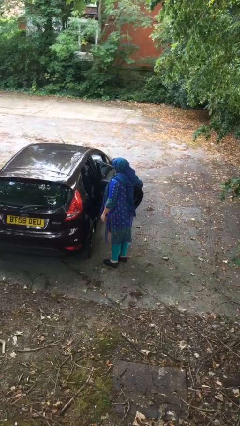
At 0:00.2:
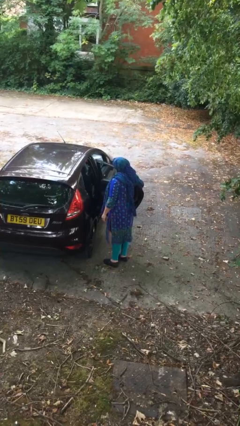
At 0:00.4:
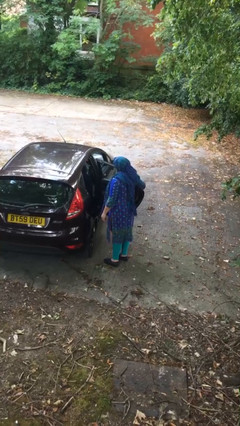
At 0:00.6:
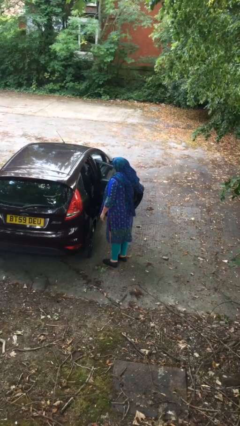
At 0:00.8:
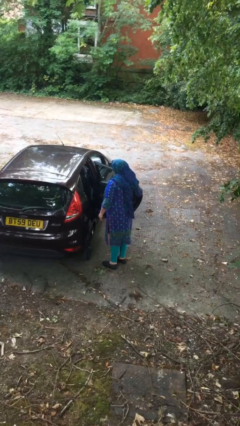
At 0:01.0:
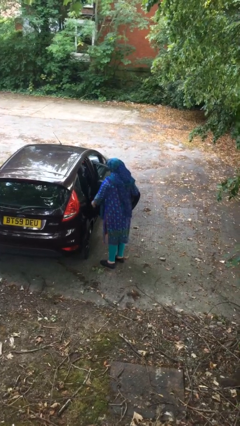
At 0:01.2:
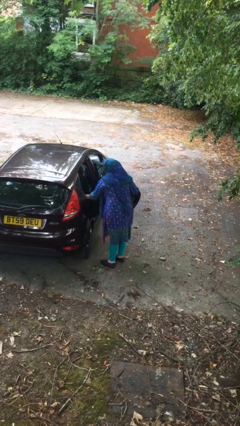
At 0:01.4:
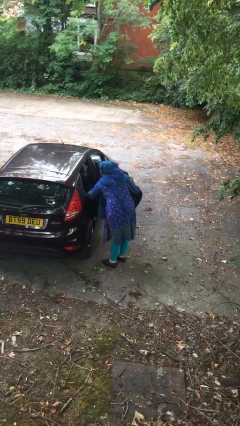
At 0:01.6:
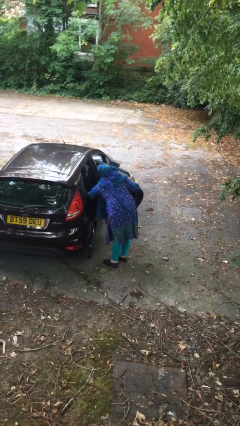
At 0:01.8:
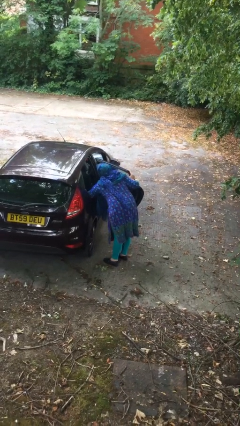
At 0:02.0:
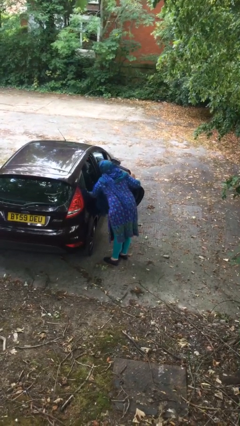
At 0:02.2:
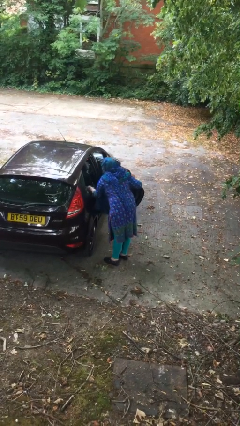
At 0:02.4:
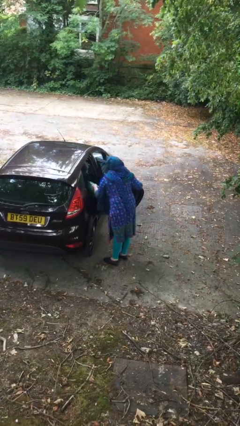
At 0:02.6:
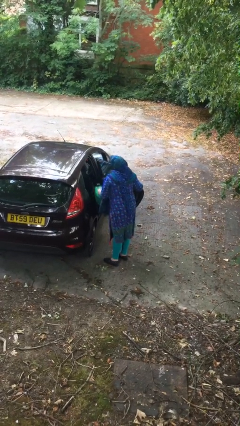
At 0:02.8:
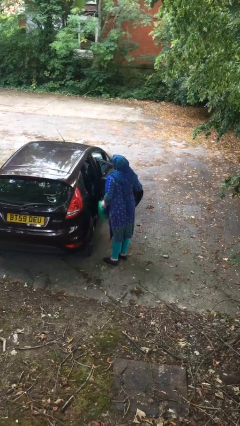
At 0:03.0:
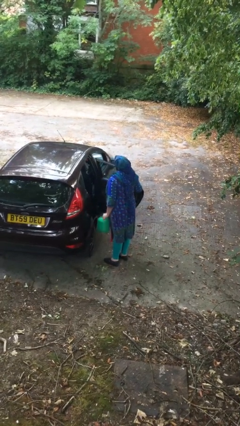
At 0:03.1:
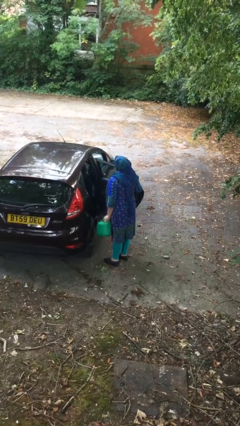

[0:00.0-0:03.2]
person unloads car

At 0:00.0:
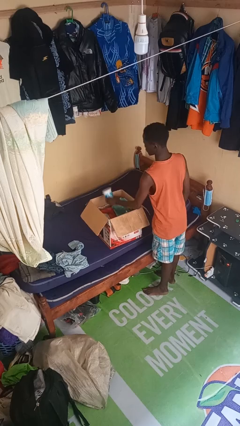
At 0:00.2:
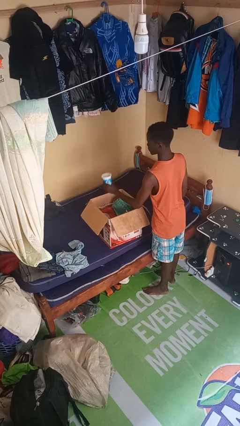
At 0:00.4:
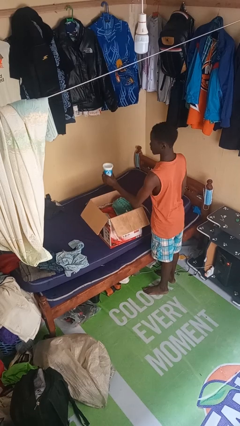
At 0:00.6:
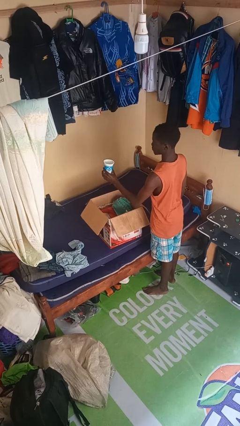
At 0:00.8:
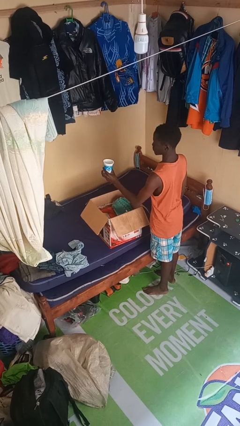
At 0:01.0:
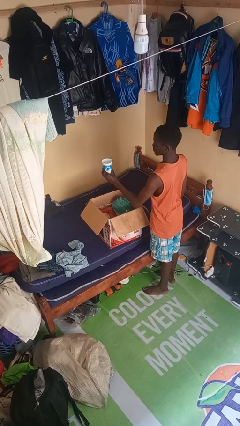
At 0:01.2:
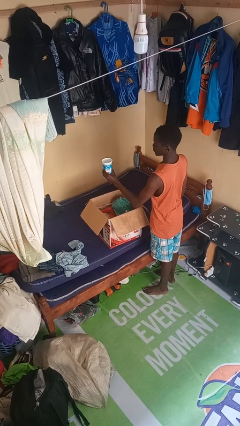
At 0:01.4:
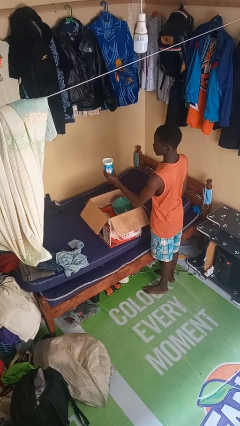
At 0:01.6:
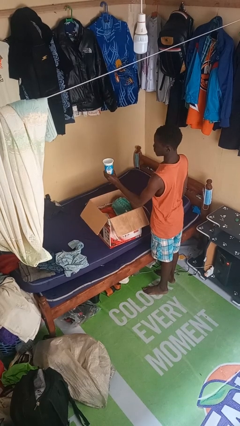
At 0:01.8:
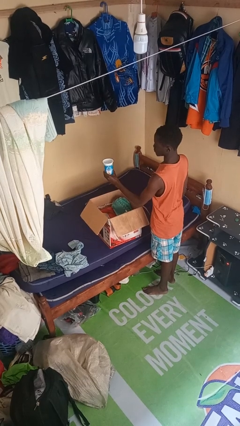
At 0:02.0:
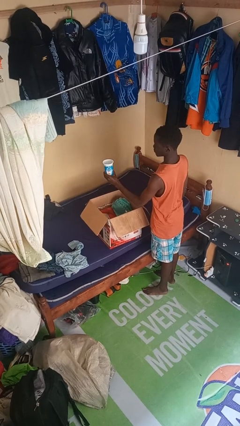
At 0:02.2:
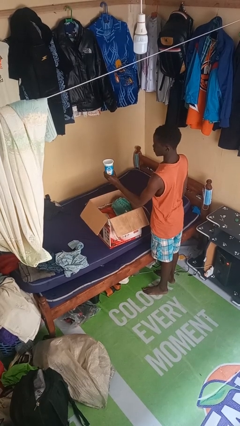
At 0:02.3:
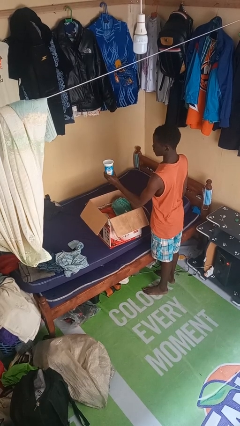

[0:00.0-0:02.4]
person takes object from box

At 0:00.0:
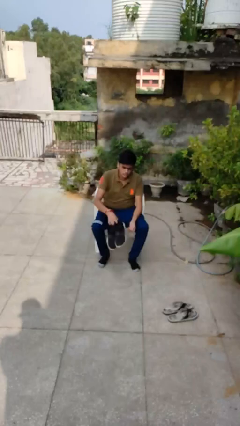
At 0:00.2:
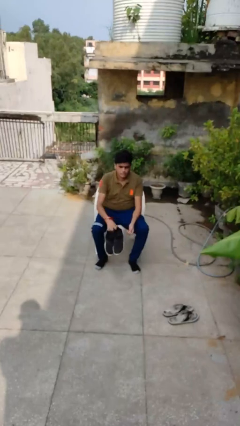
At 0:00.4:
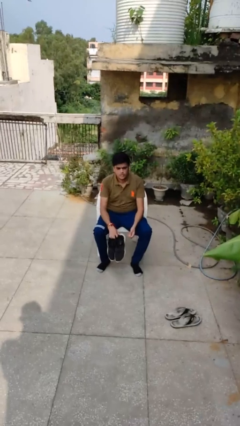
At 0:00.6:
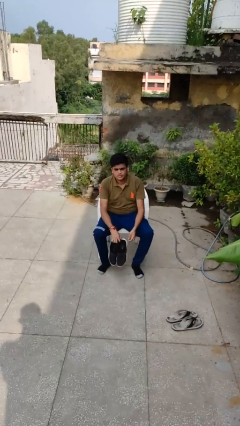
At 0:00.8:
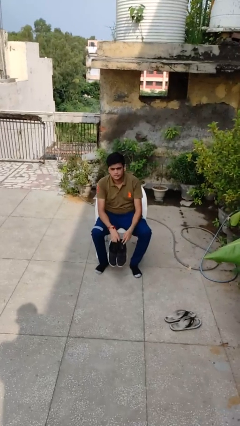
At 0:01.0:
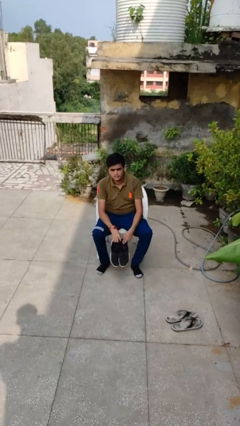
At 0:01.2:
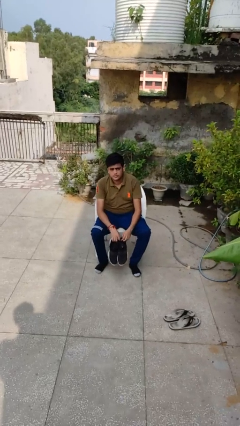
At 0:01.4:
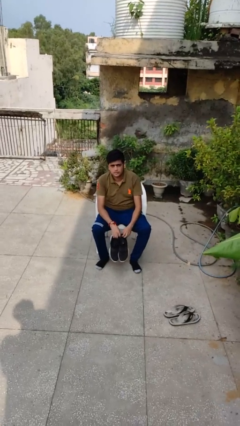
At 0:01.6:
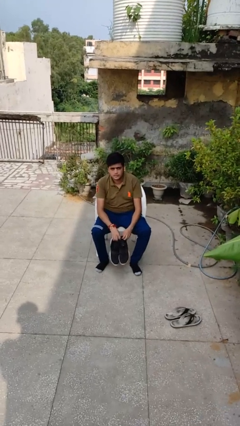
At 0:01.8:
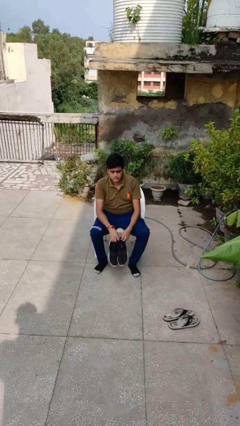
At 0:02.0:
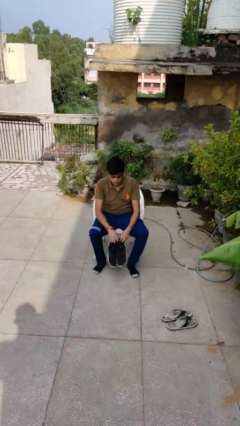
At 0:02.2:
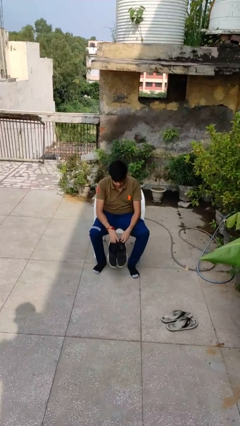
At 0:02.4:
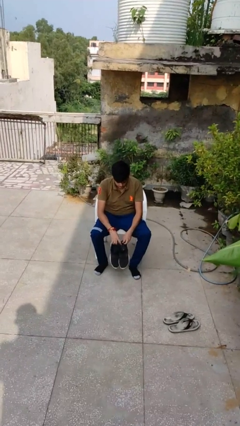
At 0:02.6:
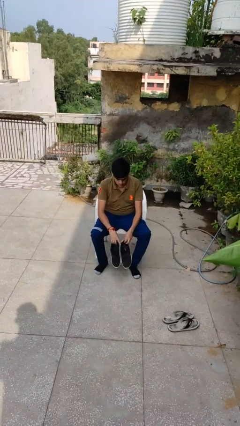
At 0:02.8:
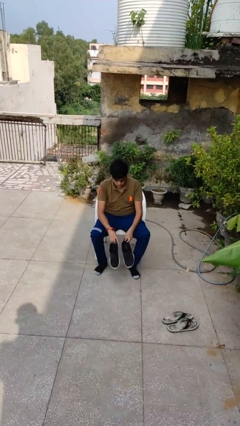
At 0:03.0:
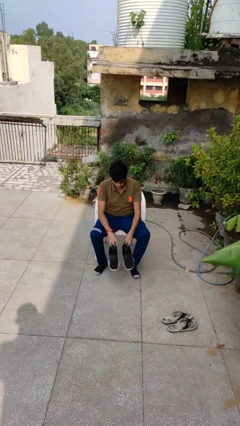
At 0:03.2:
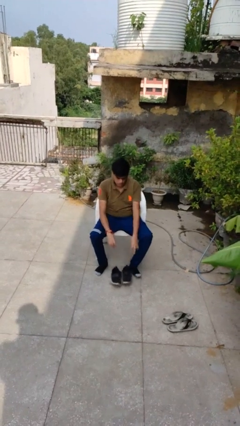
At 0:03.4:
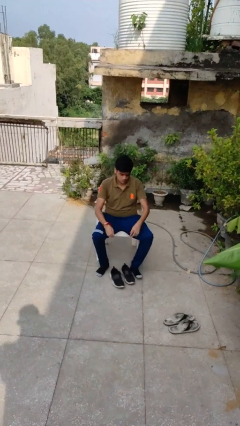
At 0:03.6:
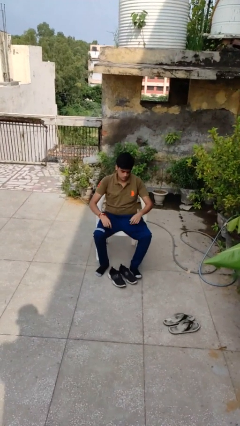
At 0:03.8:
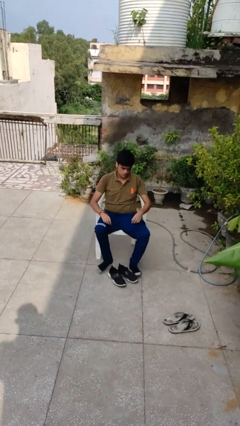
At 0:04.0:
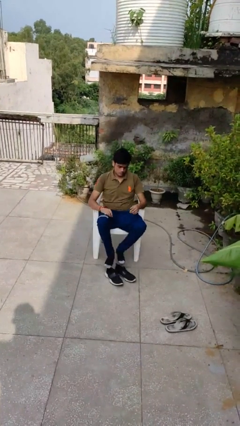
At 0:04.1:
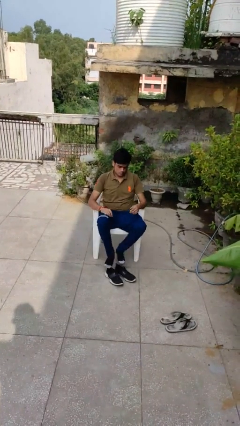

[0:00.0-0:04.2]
person puts on shoes

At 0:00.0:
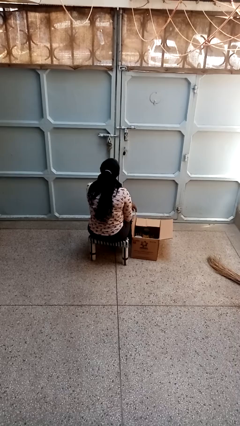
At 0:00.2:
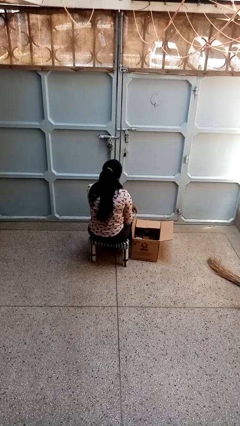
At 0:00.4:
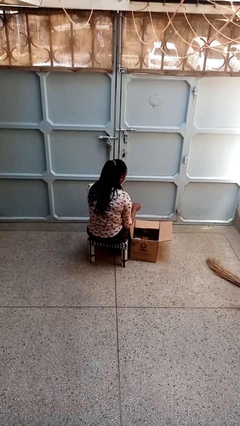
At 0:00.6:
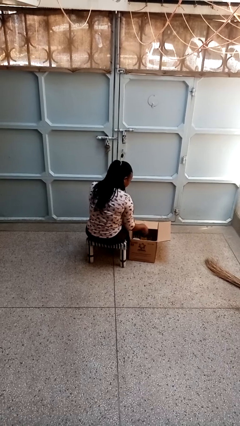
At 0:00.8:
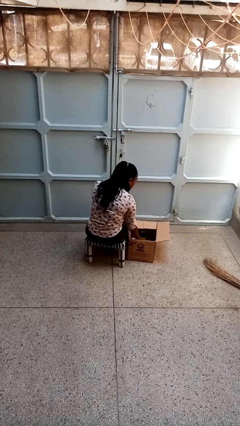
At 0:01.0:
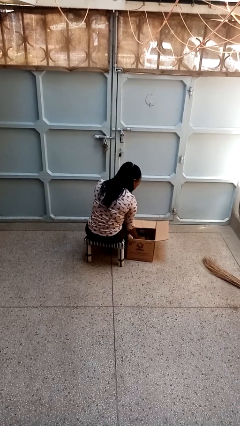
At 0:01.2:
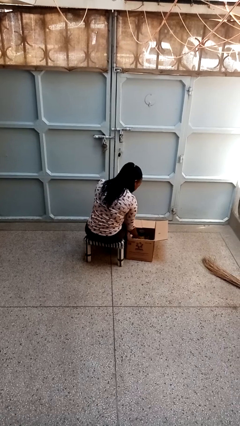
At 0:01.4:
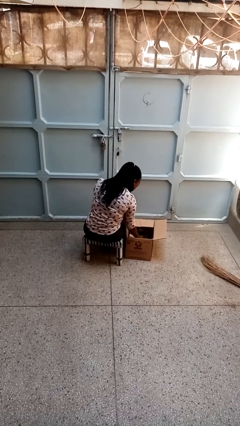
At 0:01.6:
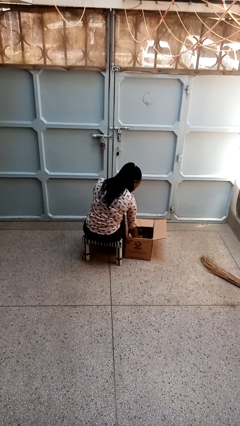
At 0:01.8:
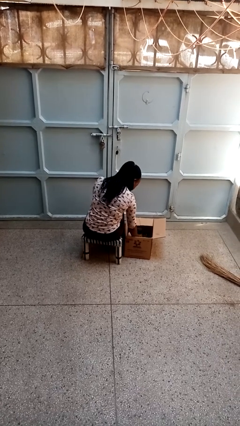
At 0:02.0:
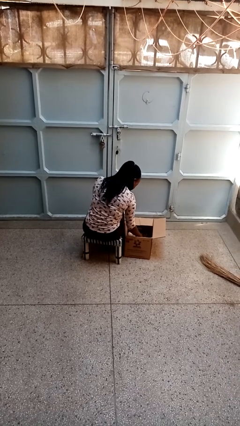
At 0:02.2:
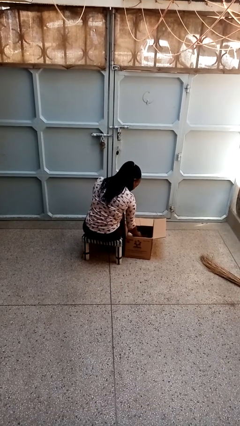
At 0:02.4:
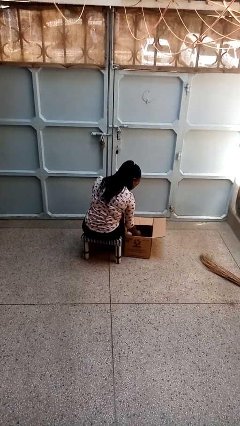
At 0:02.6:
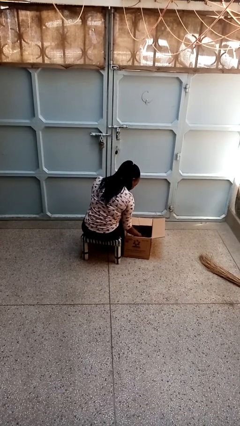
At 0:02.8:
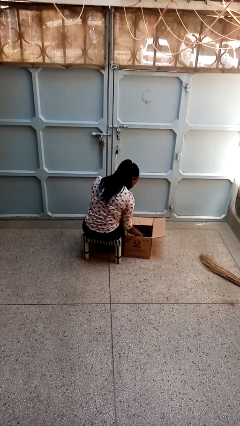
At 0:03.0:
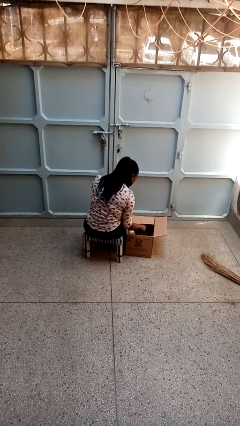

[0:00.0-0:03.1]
person searches in box

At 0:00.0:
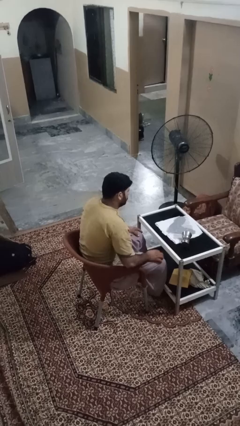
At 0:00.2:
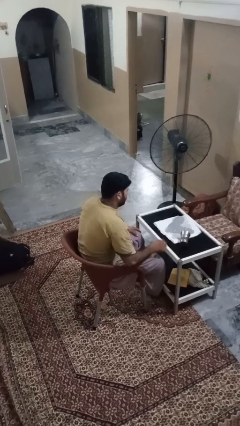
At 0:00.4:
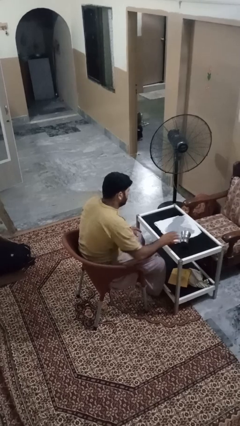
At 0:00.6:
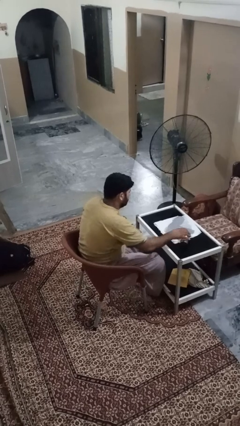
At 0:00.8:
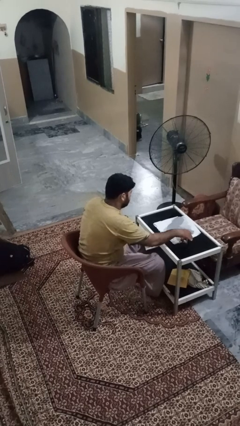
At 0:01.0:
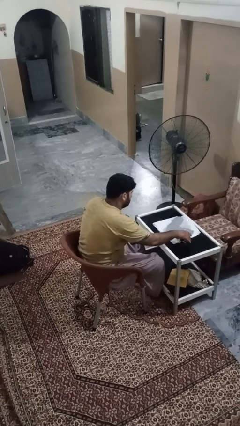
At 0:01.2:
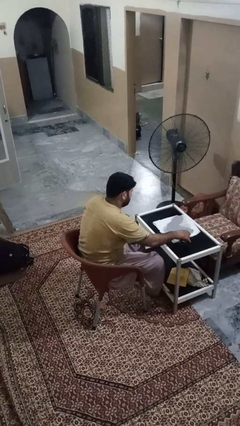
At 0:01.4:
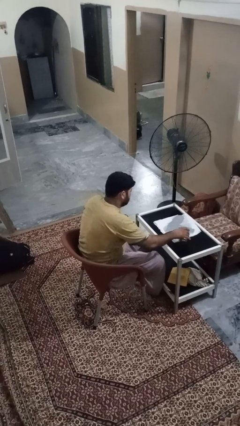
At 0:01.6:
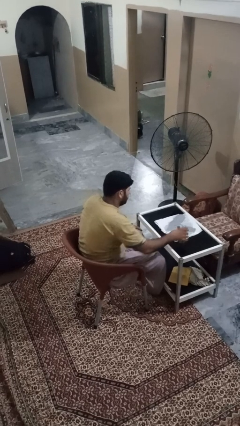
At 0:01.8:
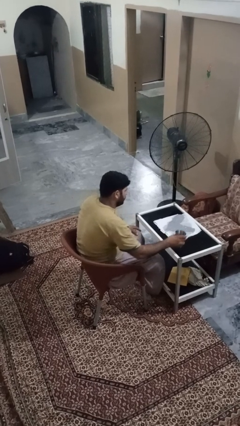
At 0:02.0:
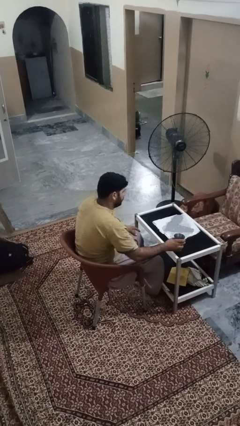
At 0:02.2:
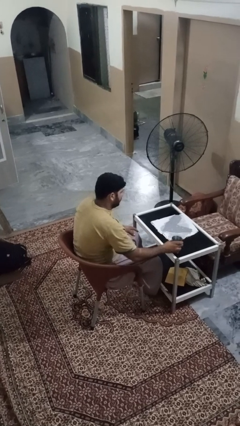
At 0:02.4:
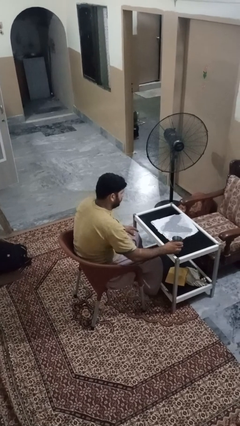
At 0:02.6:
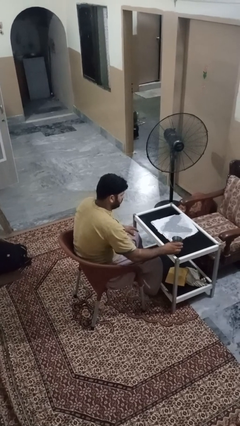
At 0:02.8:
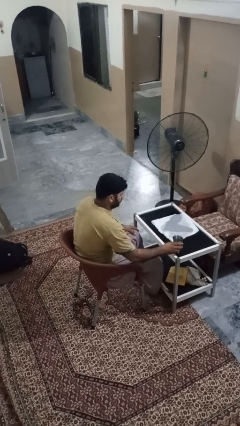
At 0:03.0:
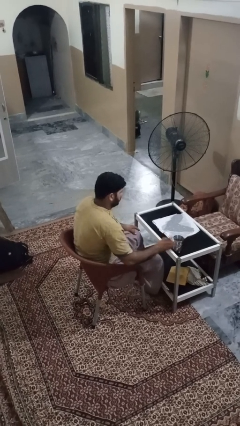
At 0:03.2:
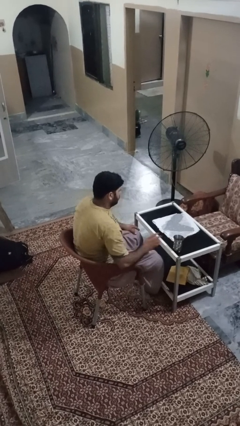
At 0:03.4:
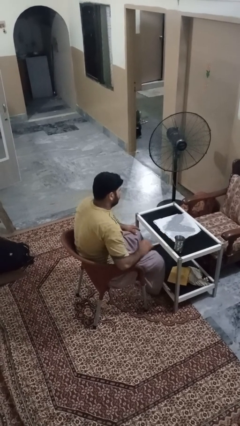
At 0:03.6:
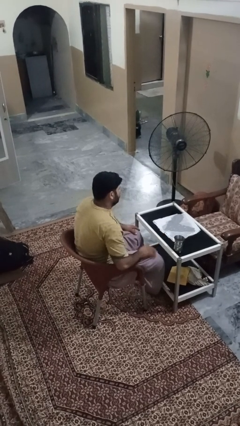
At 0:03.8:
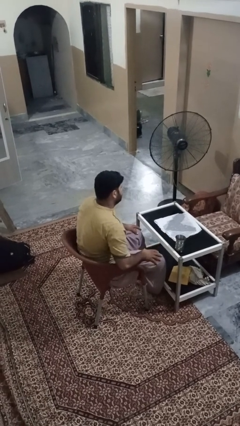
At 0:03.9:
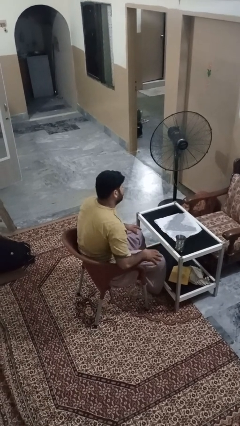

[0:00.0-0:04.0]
person sets upright glass

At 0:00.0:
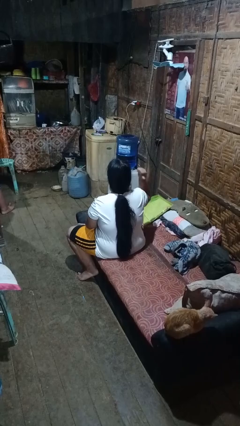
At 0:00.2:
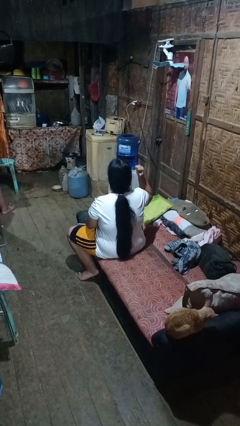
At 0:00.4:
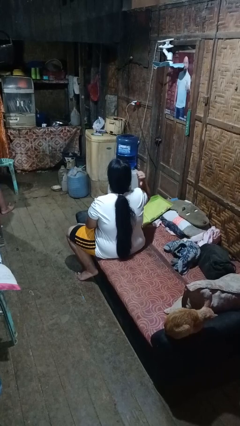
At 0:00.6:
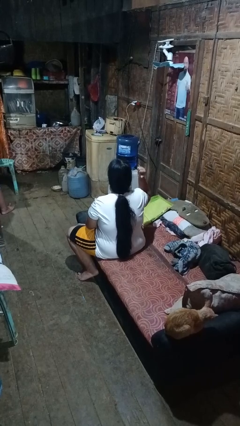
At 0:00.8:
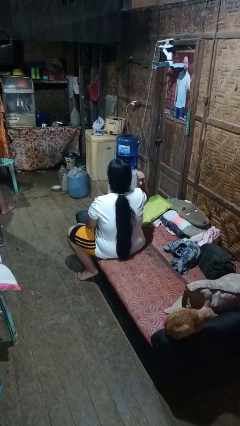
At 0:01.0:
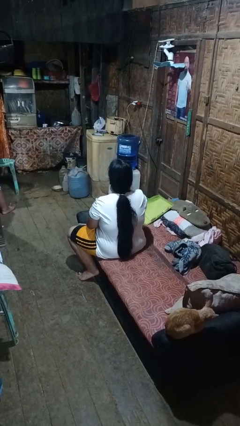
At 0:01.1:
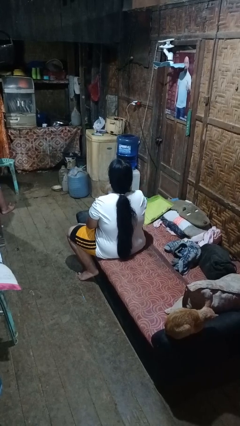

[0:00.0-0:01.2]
person gestures behind me
